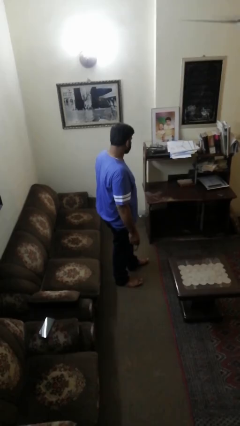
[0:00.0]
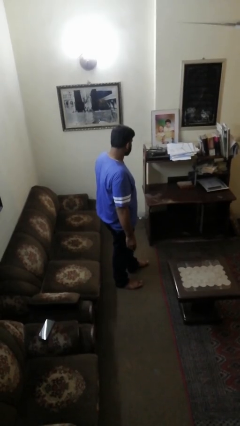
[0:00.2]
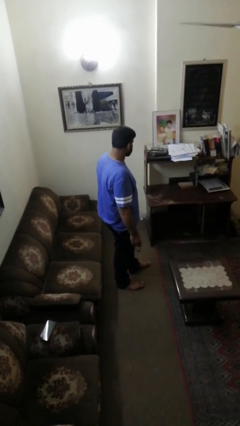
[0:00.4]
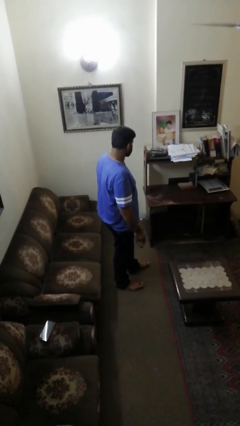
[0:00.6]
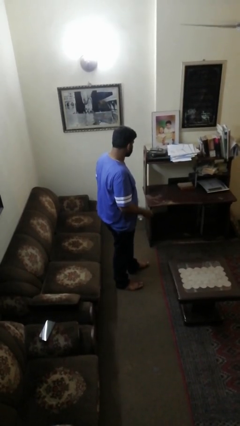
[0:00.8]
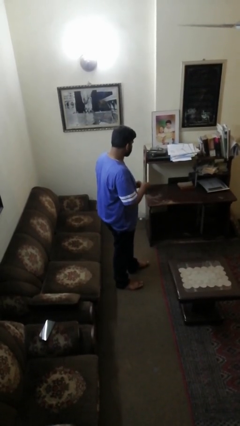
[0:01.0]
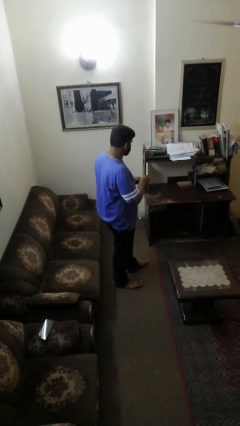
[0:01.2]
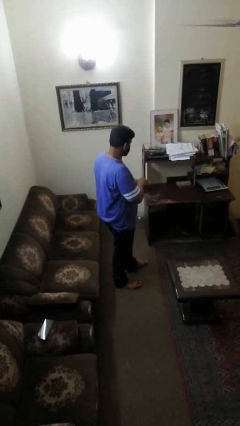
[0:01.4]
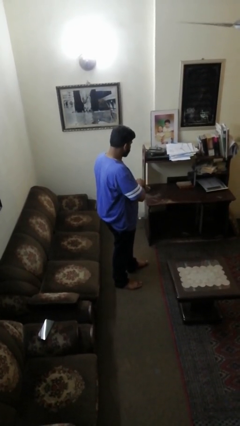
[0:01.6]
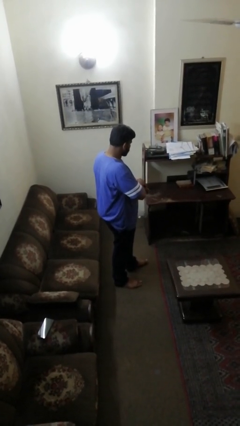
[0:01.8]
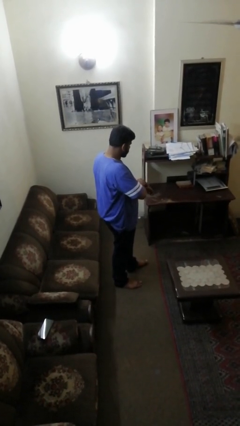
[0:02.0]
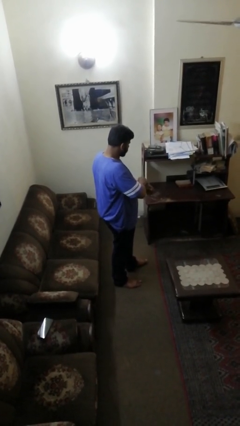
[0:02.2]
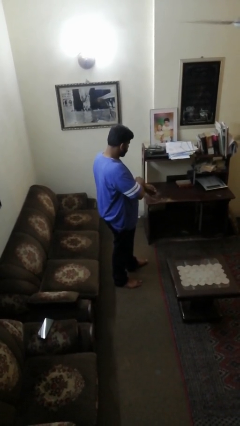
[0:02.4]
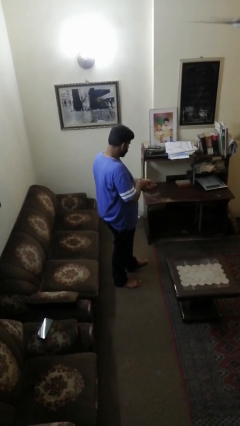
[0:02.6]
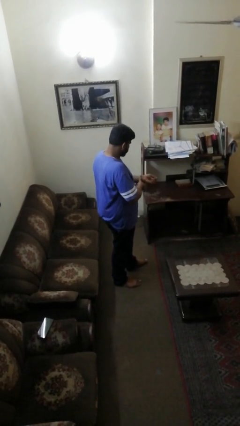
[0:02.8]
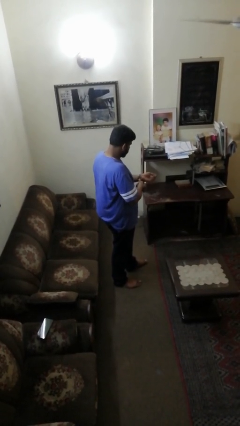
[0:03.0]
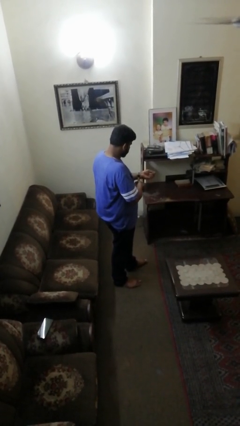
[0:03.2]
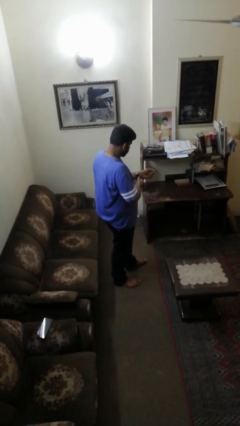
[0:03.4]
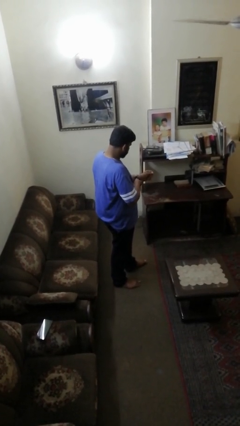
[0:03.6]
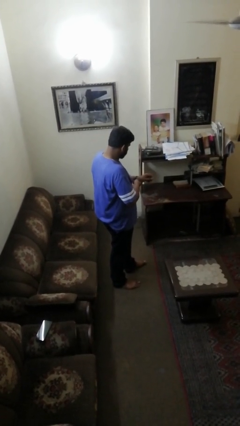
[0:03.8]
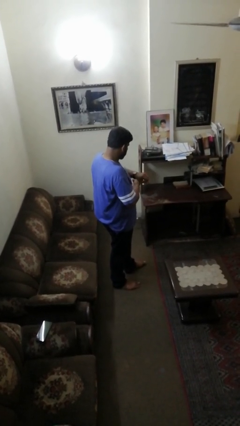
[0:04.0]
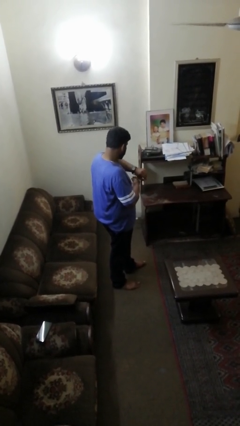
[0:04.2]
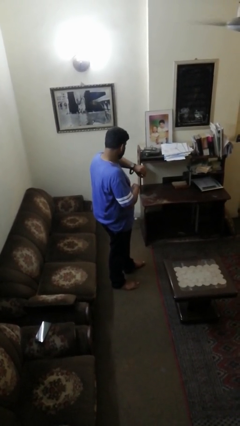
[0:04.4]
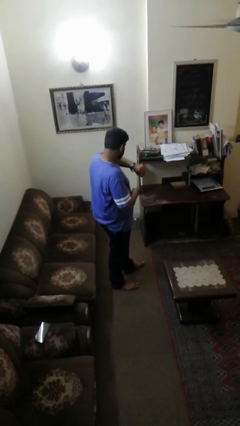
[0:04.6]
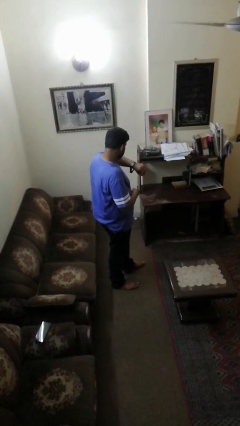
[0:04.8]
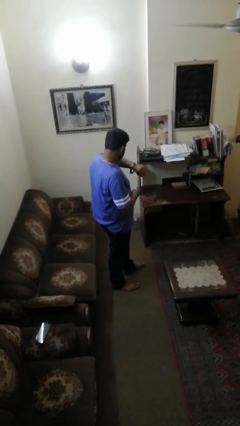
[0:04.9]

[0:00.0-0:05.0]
person puts on wristwatch

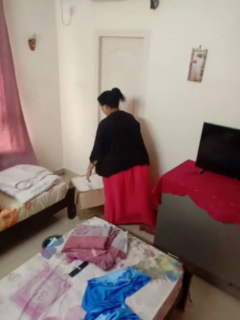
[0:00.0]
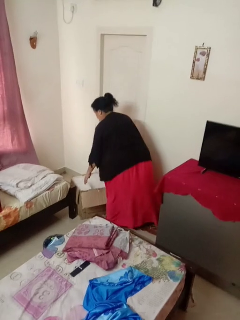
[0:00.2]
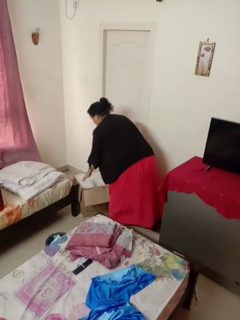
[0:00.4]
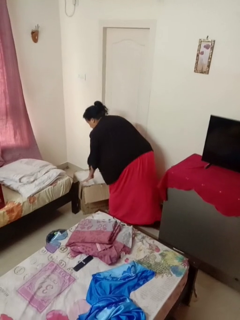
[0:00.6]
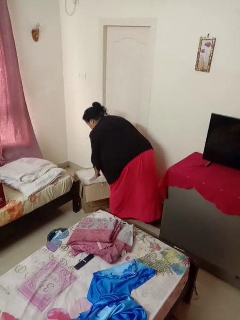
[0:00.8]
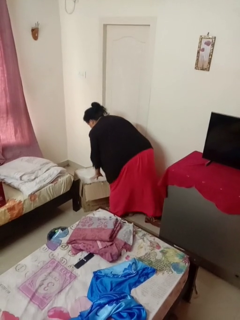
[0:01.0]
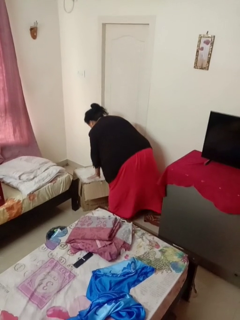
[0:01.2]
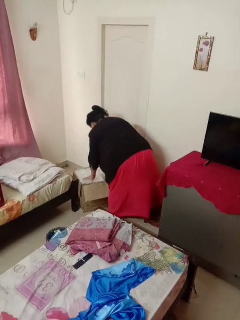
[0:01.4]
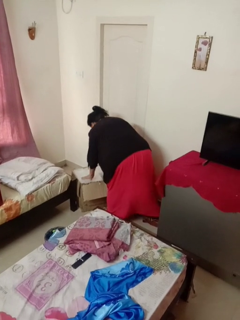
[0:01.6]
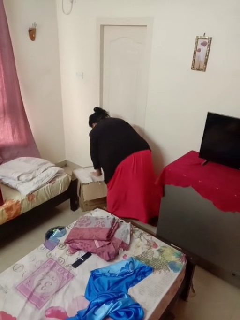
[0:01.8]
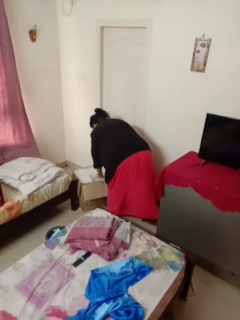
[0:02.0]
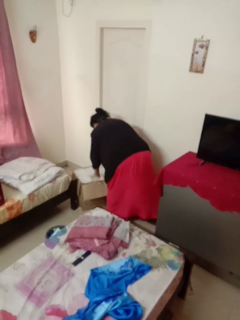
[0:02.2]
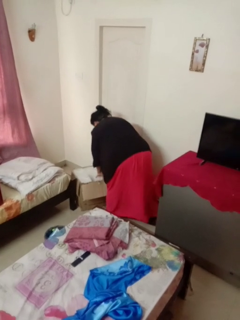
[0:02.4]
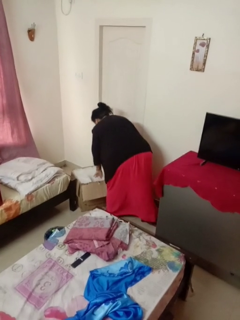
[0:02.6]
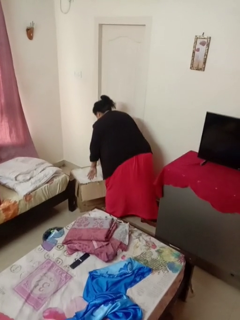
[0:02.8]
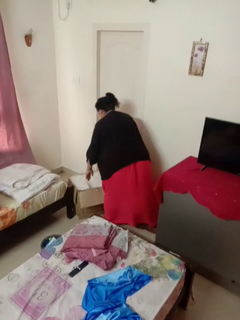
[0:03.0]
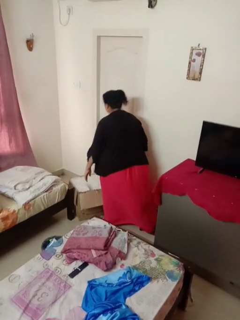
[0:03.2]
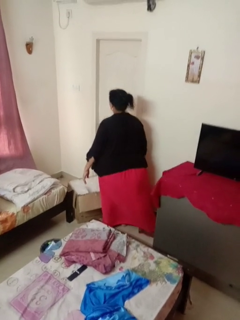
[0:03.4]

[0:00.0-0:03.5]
person searches in box

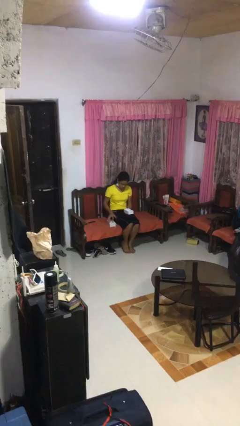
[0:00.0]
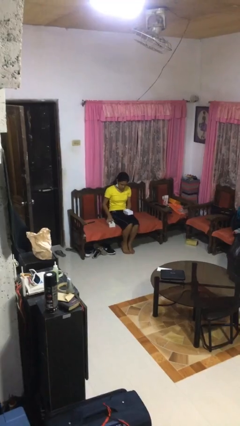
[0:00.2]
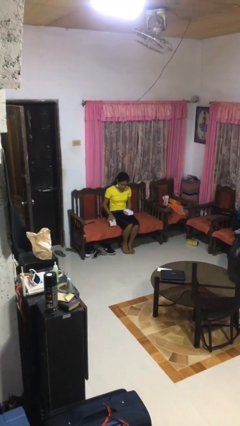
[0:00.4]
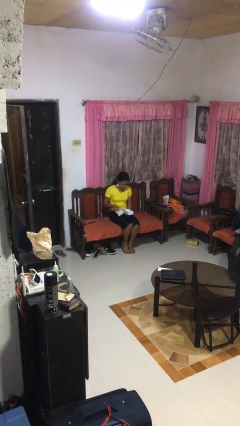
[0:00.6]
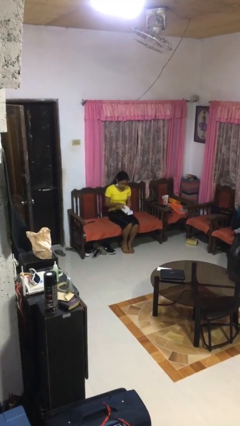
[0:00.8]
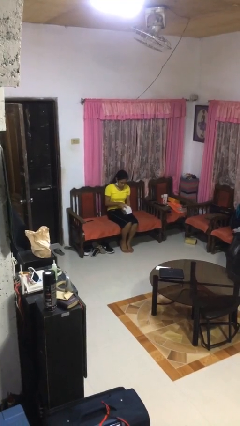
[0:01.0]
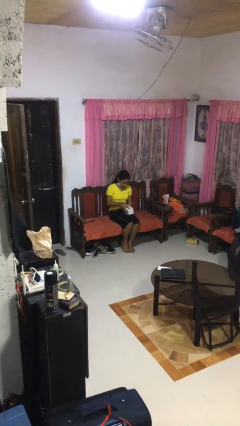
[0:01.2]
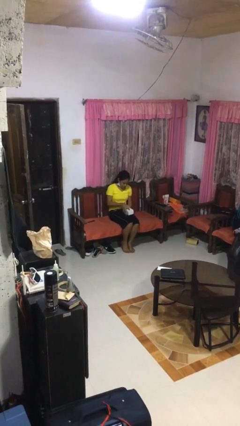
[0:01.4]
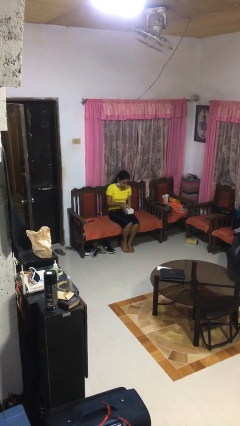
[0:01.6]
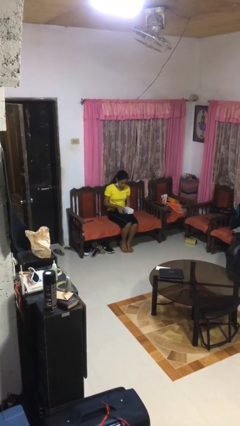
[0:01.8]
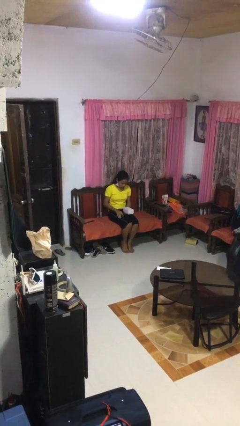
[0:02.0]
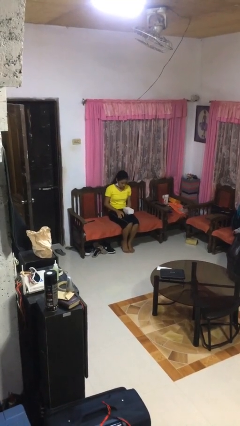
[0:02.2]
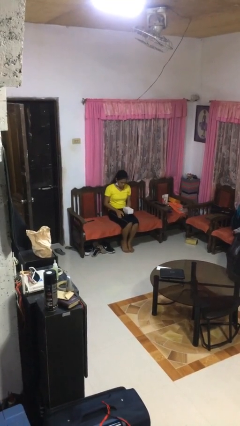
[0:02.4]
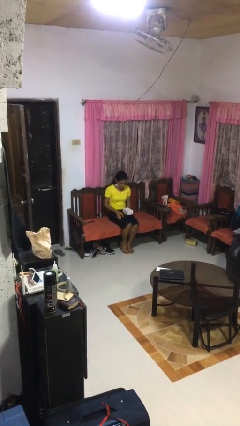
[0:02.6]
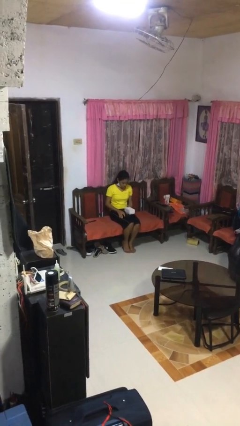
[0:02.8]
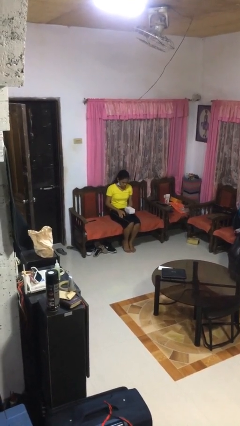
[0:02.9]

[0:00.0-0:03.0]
person closes jewelry box

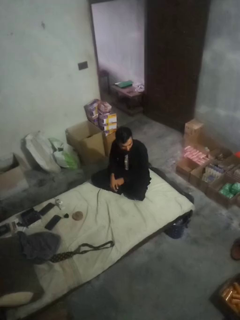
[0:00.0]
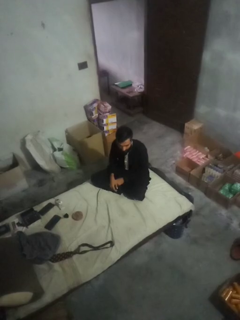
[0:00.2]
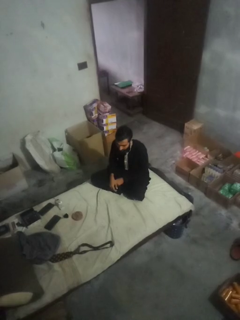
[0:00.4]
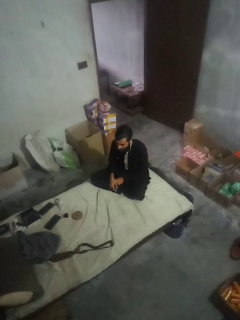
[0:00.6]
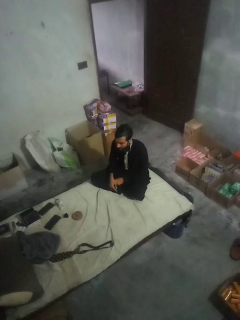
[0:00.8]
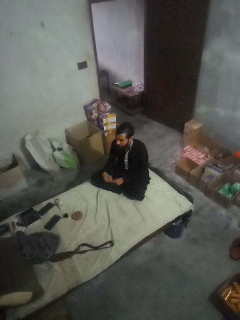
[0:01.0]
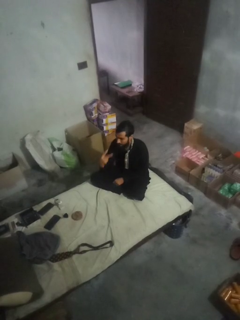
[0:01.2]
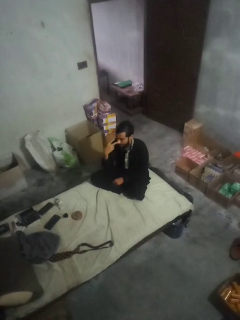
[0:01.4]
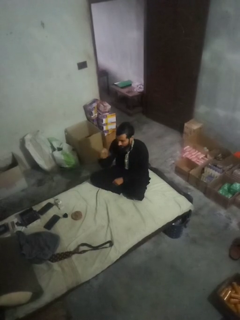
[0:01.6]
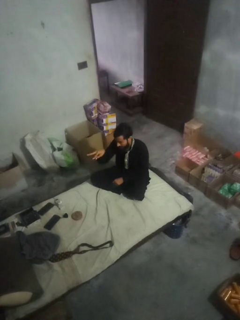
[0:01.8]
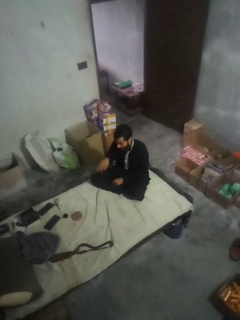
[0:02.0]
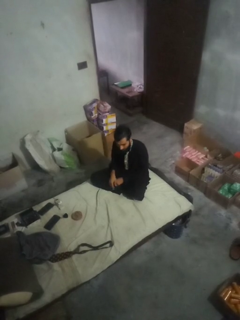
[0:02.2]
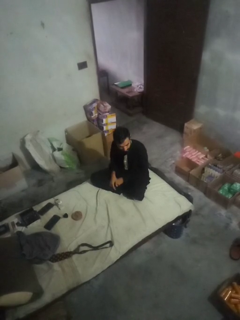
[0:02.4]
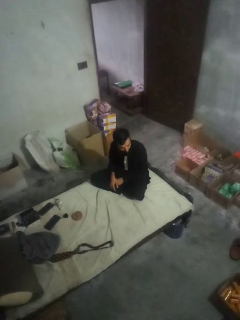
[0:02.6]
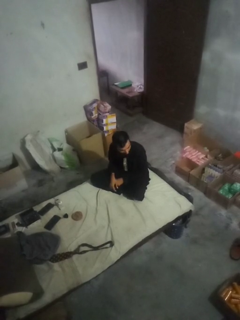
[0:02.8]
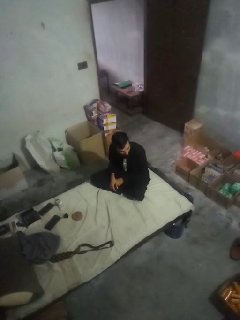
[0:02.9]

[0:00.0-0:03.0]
person gestures watch closely

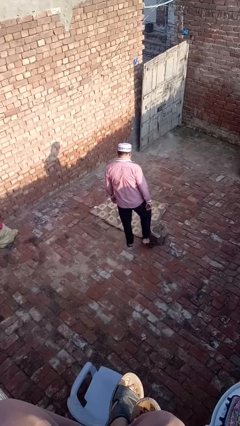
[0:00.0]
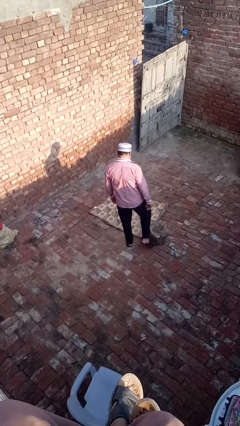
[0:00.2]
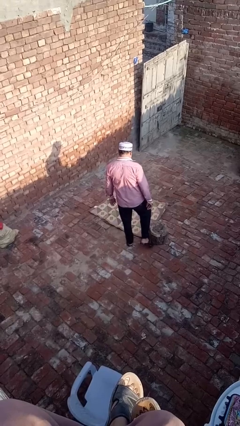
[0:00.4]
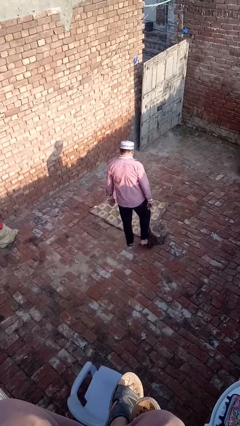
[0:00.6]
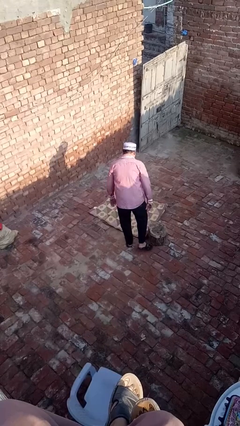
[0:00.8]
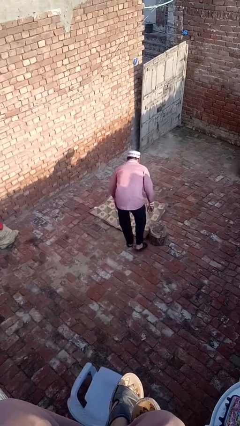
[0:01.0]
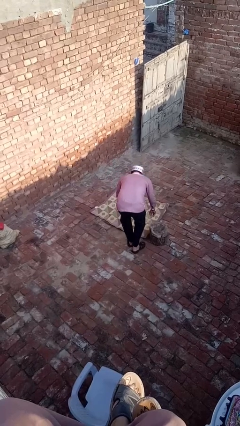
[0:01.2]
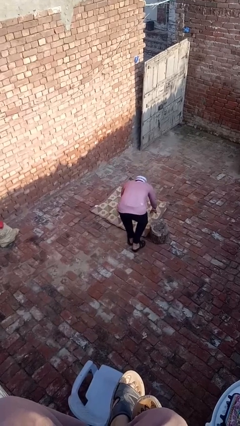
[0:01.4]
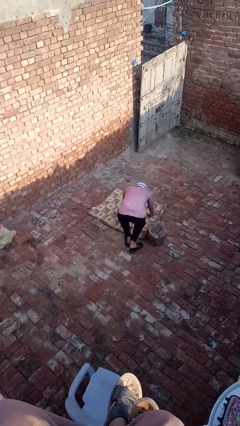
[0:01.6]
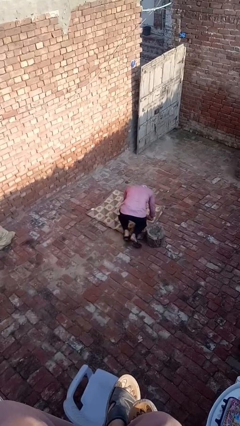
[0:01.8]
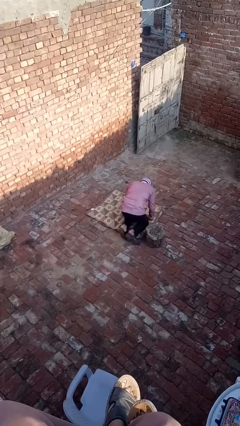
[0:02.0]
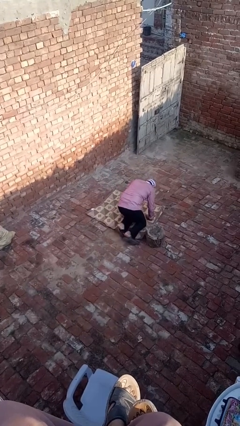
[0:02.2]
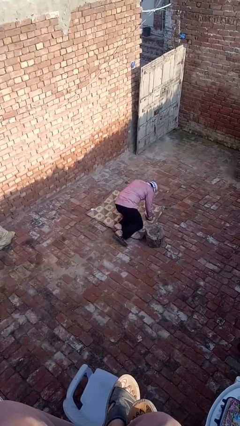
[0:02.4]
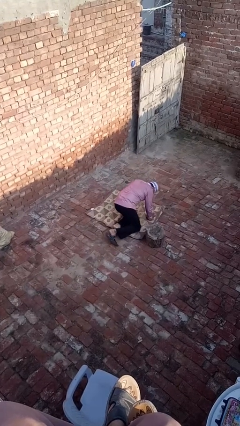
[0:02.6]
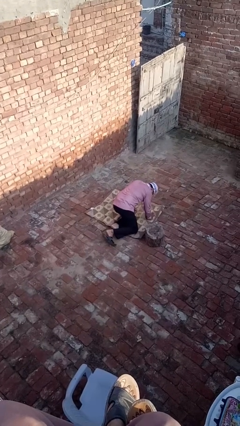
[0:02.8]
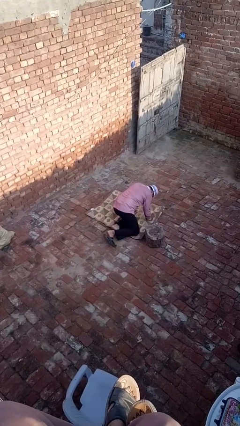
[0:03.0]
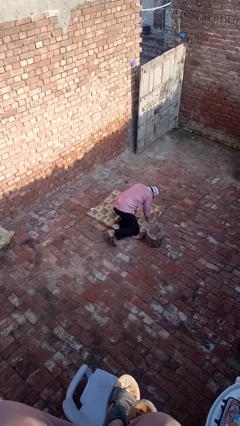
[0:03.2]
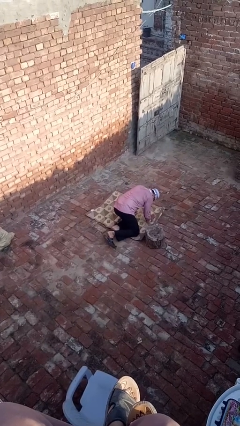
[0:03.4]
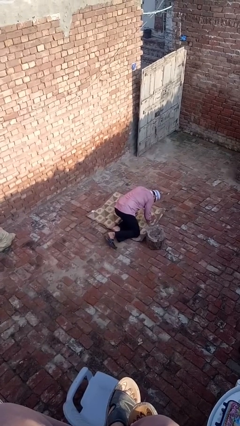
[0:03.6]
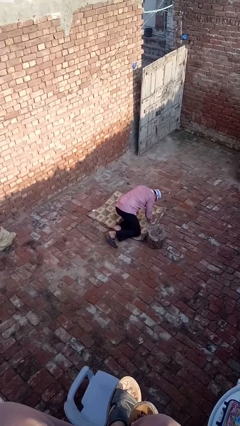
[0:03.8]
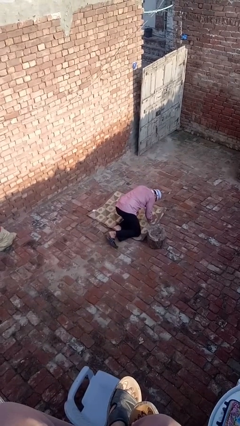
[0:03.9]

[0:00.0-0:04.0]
person lies down on floor
